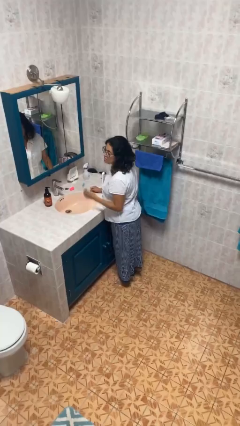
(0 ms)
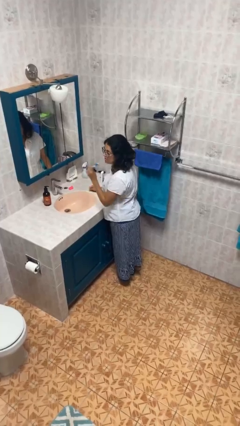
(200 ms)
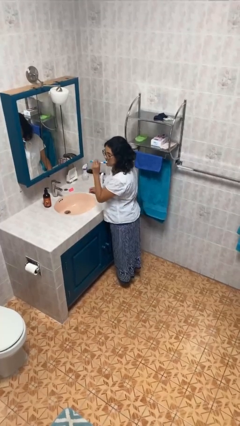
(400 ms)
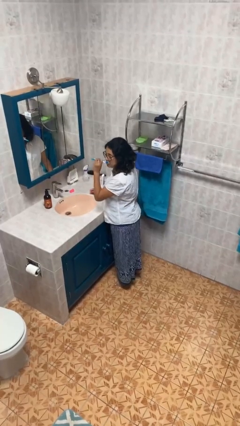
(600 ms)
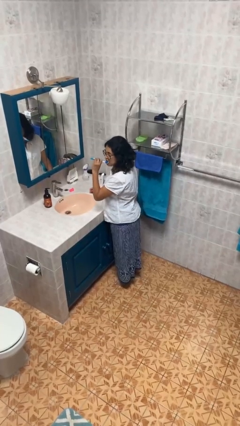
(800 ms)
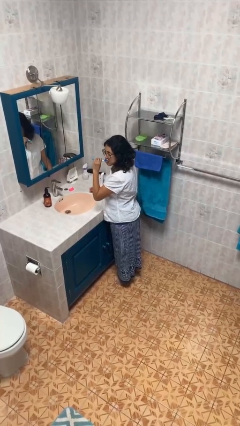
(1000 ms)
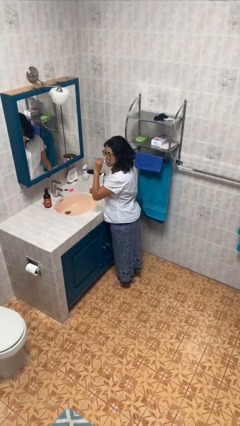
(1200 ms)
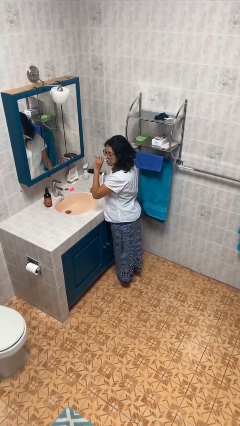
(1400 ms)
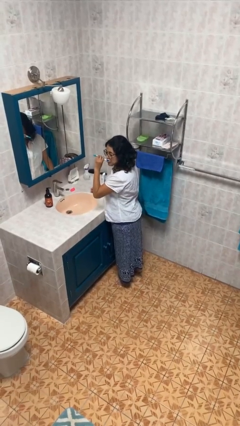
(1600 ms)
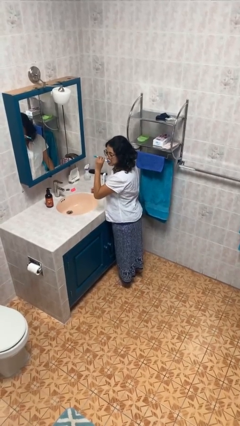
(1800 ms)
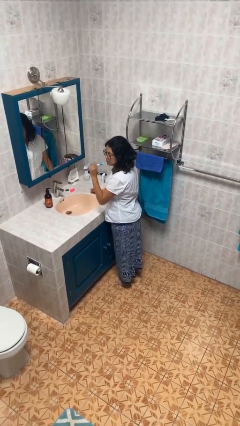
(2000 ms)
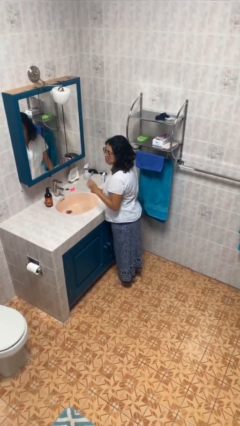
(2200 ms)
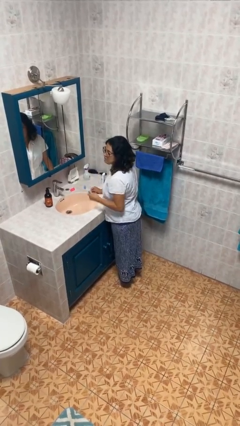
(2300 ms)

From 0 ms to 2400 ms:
person brushes teeth

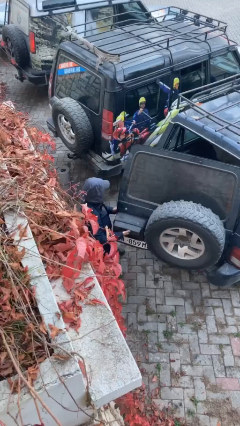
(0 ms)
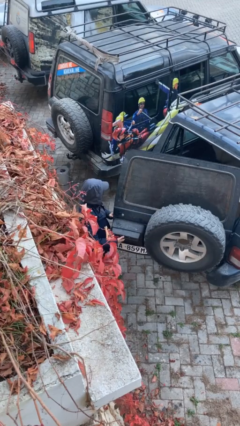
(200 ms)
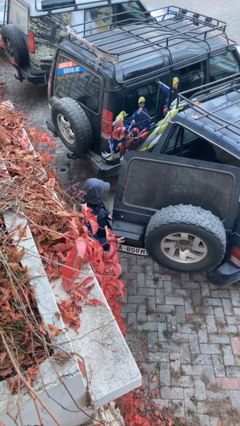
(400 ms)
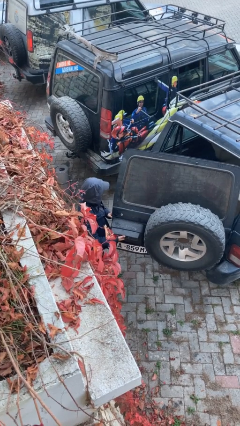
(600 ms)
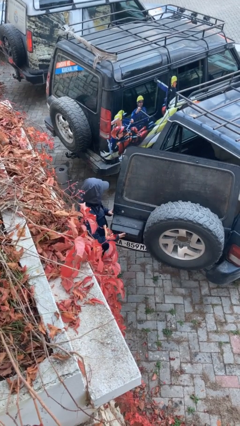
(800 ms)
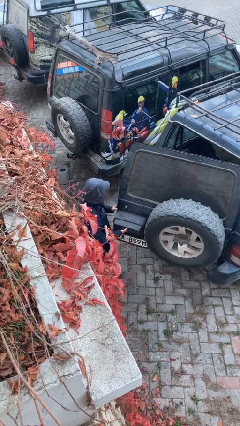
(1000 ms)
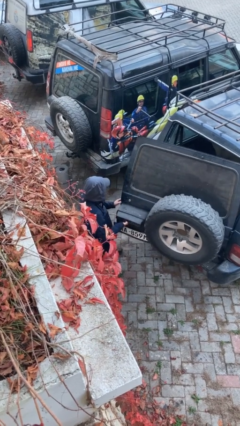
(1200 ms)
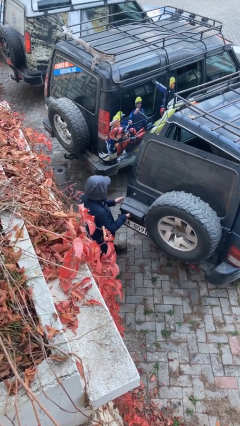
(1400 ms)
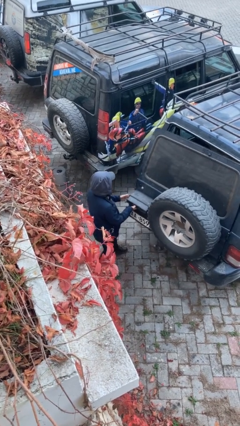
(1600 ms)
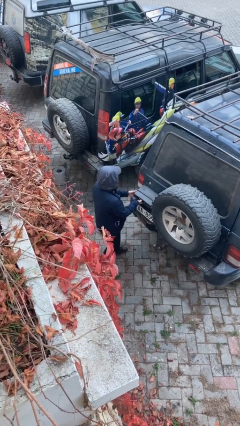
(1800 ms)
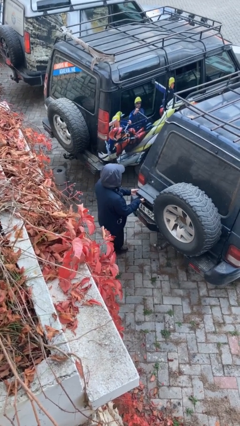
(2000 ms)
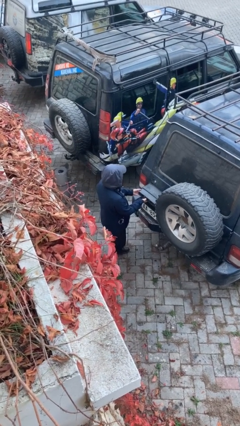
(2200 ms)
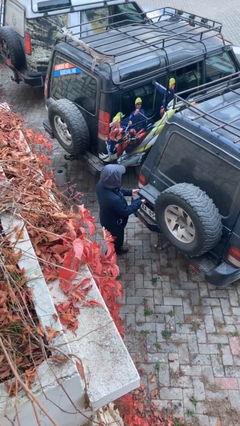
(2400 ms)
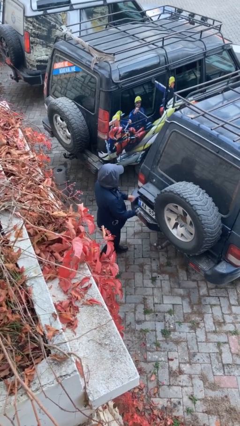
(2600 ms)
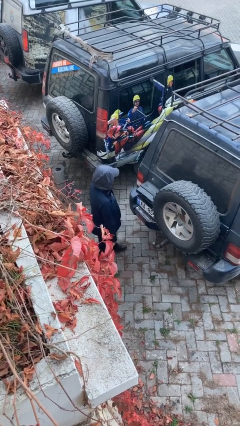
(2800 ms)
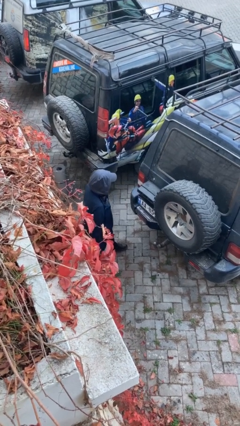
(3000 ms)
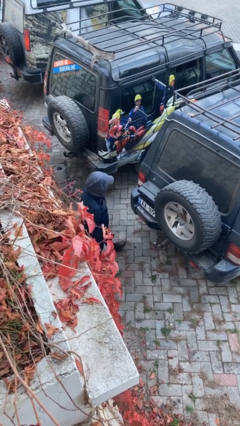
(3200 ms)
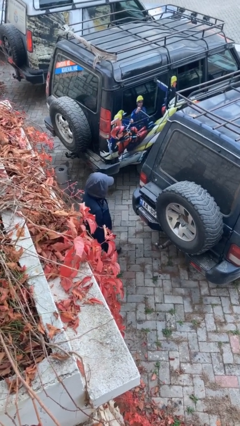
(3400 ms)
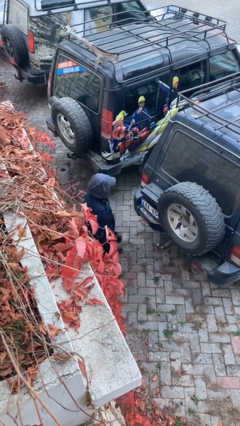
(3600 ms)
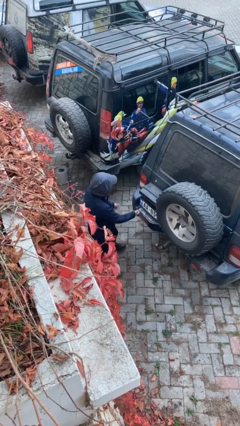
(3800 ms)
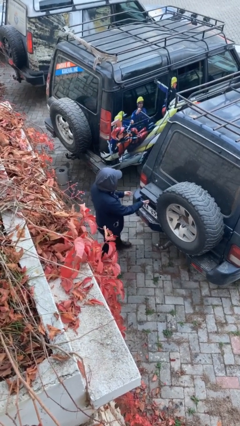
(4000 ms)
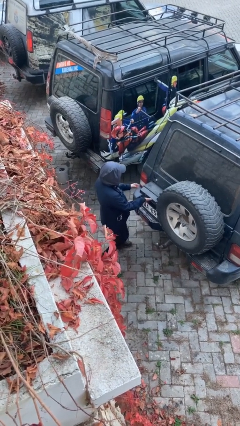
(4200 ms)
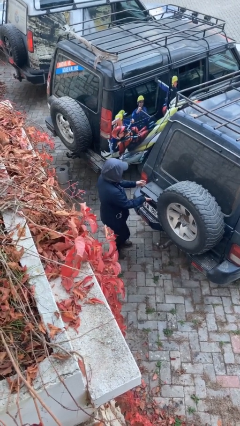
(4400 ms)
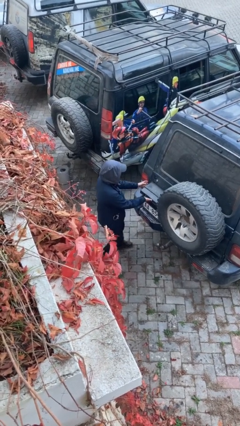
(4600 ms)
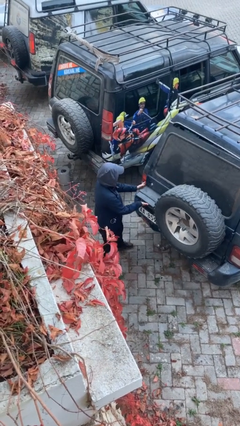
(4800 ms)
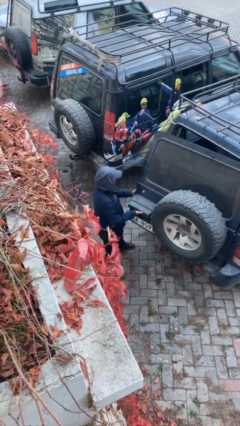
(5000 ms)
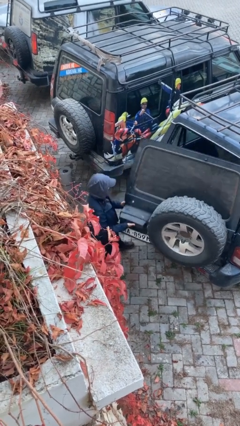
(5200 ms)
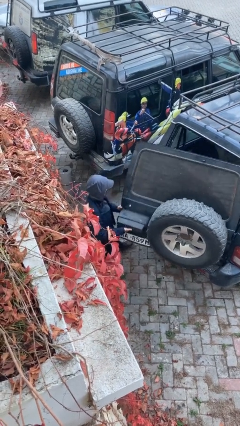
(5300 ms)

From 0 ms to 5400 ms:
person opens car trunk

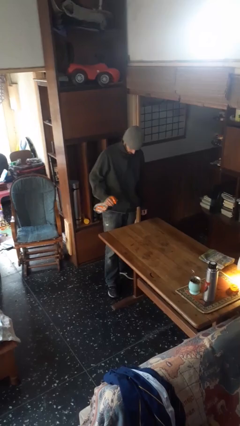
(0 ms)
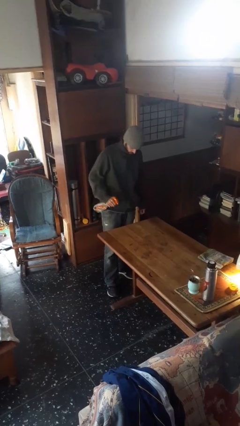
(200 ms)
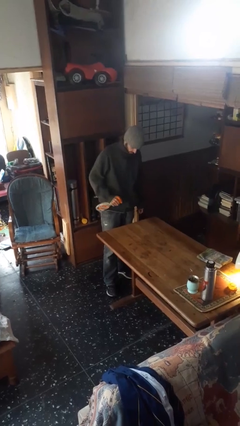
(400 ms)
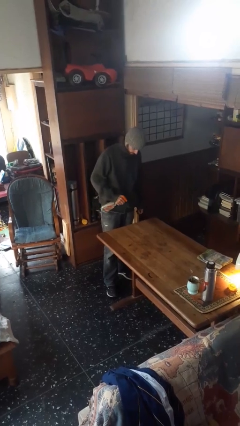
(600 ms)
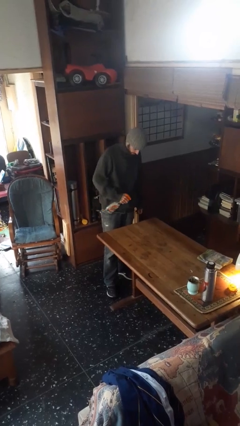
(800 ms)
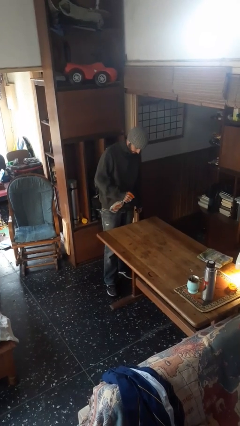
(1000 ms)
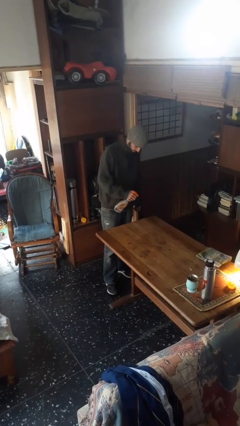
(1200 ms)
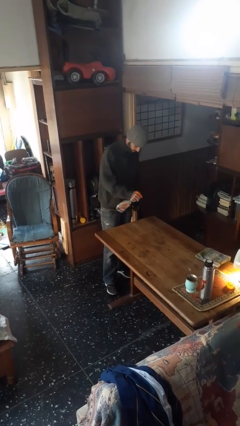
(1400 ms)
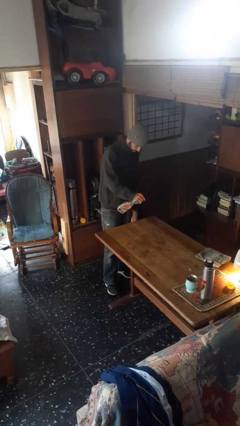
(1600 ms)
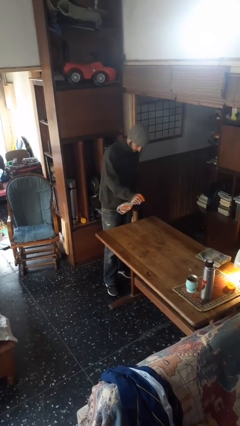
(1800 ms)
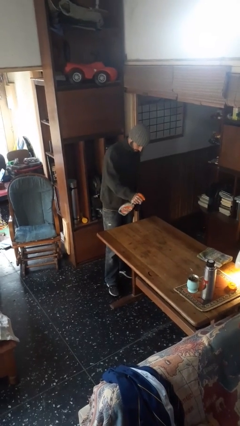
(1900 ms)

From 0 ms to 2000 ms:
person sprays from bottle

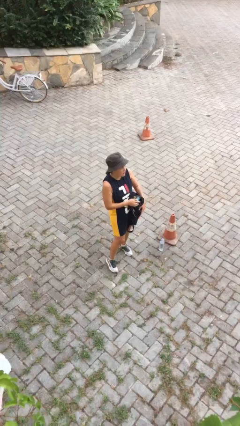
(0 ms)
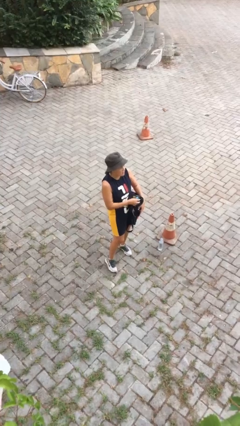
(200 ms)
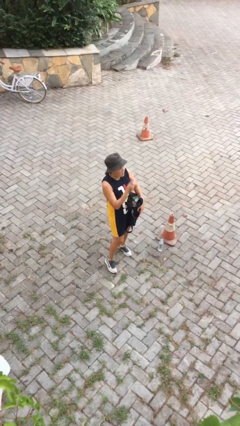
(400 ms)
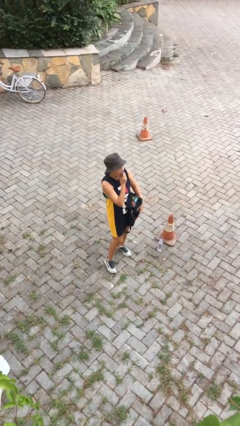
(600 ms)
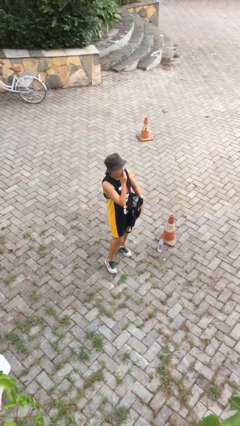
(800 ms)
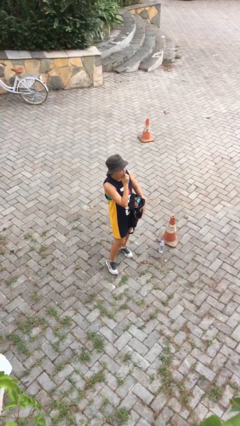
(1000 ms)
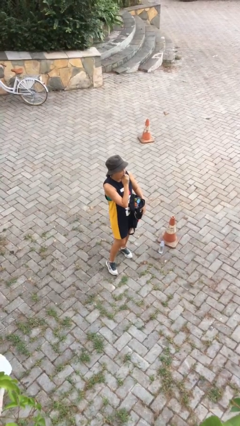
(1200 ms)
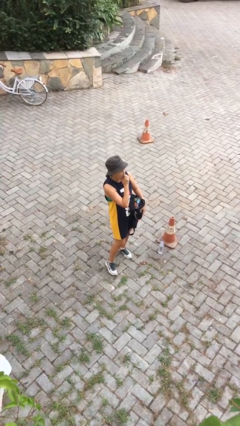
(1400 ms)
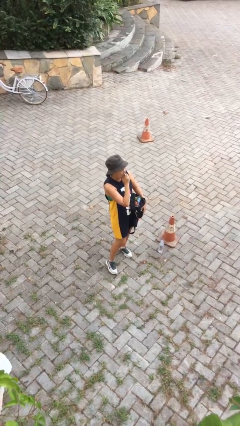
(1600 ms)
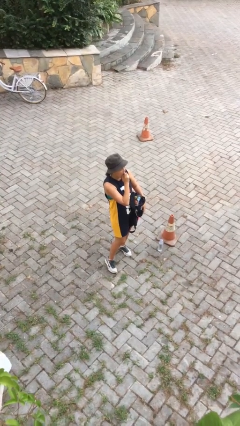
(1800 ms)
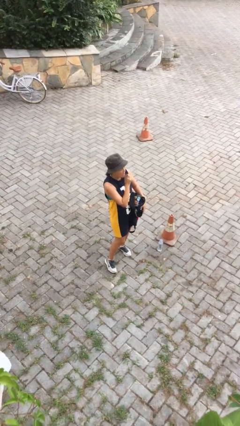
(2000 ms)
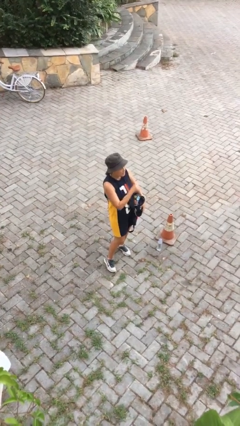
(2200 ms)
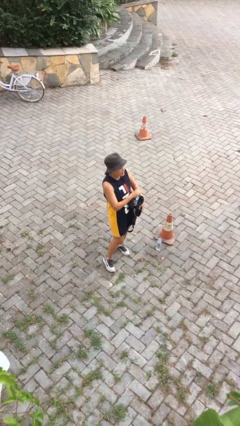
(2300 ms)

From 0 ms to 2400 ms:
person eats snack from bag

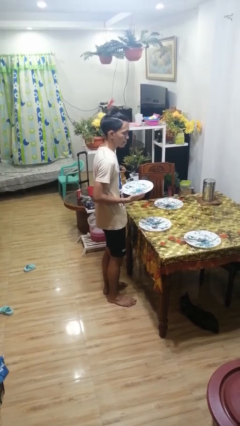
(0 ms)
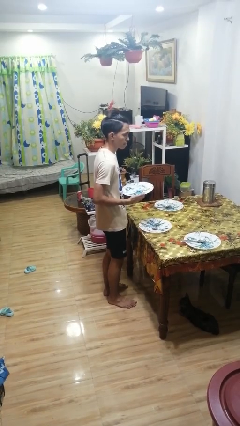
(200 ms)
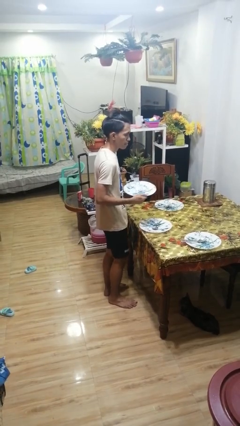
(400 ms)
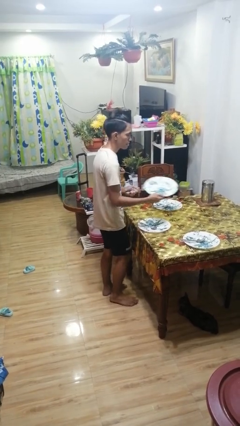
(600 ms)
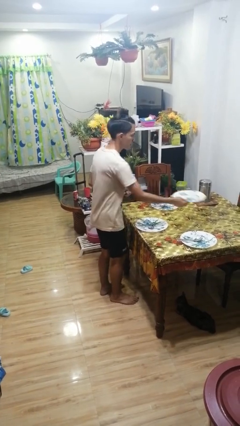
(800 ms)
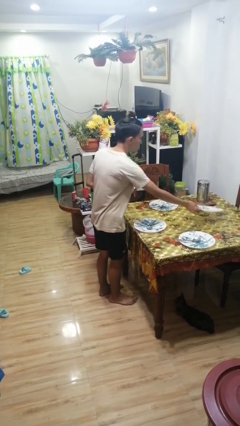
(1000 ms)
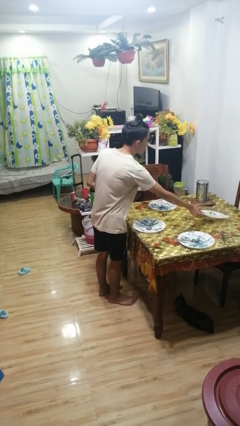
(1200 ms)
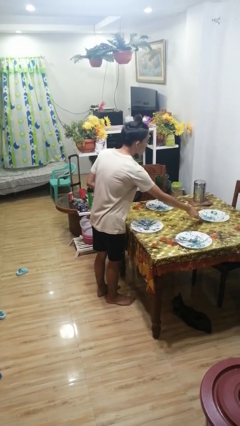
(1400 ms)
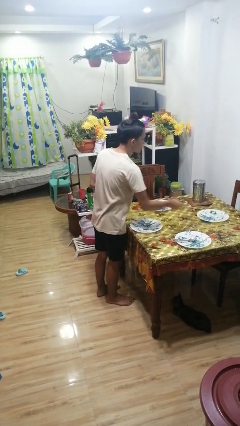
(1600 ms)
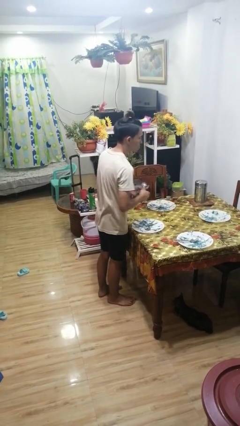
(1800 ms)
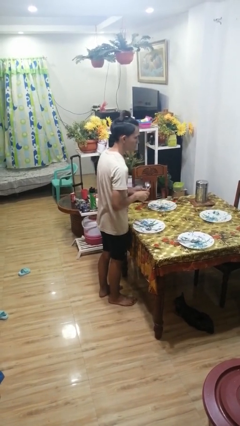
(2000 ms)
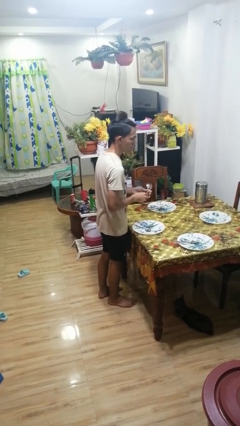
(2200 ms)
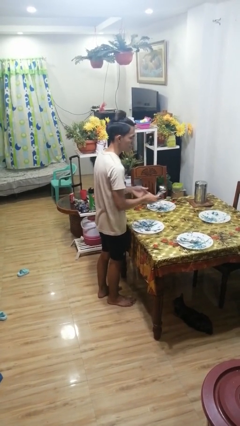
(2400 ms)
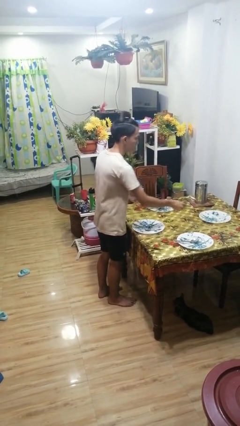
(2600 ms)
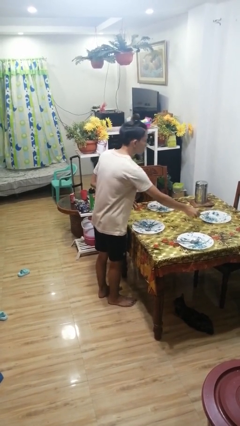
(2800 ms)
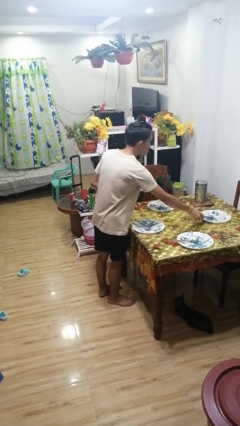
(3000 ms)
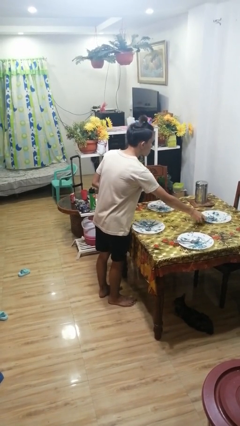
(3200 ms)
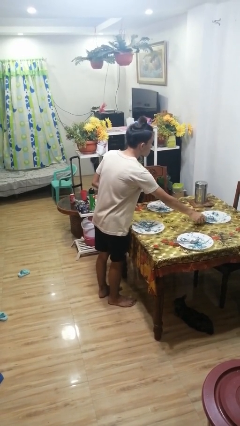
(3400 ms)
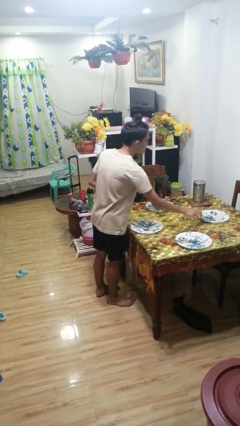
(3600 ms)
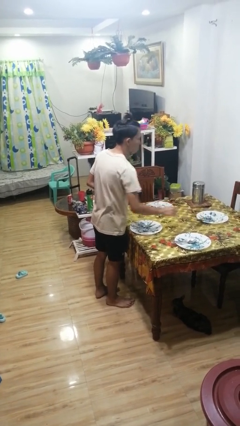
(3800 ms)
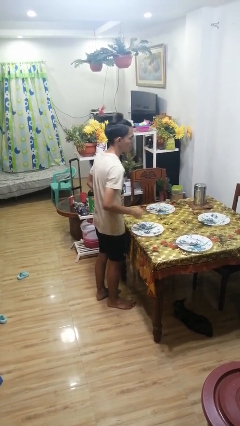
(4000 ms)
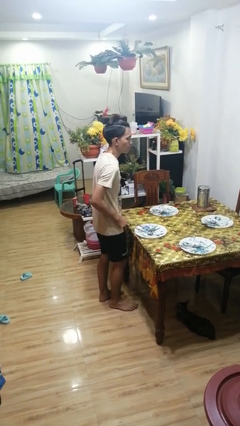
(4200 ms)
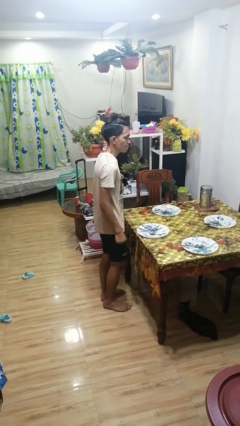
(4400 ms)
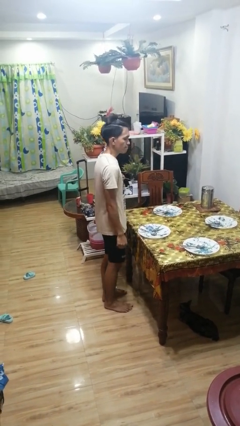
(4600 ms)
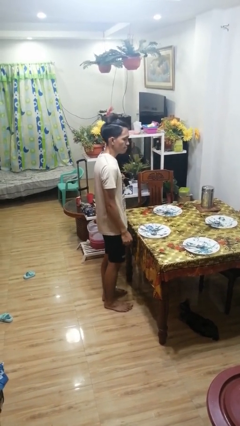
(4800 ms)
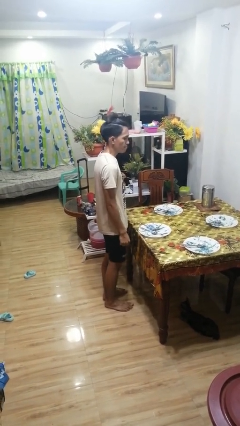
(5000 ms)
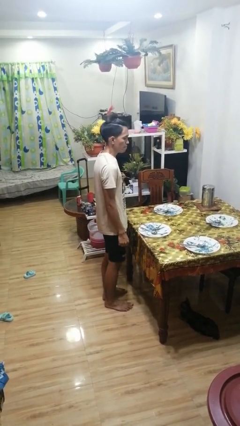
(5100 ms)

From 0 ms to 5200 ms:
person sets table
